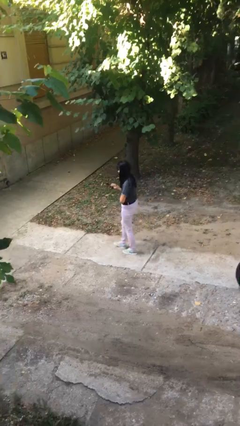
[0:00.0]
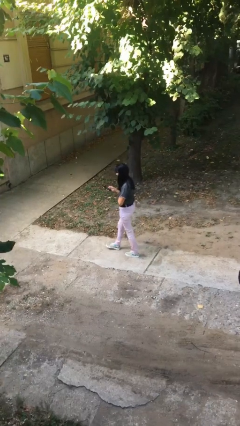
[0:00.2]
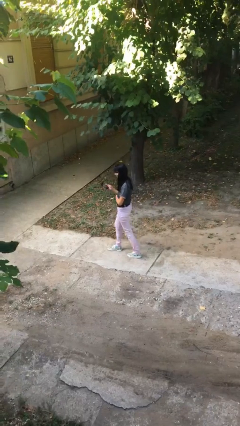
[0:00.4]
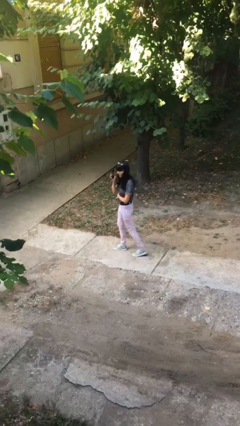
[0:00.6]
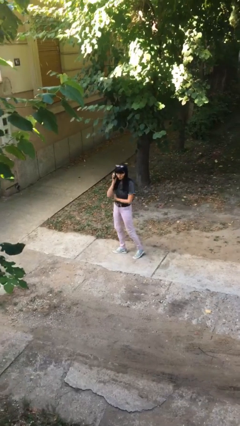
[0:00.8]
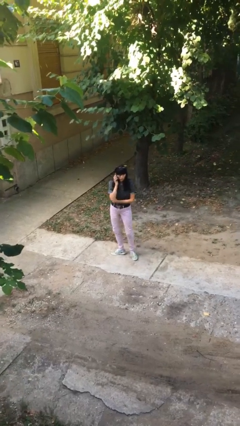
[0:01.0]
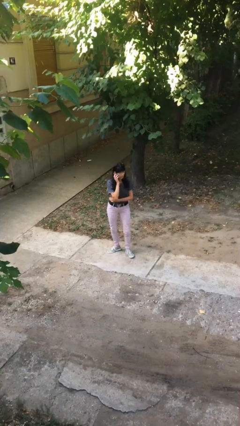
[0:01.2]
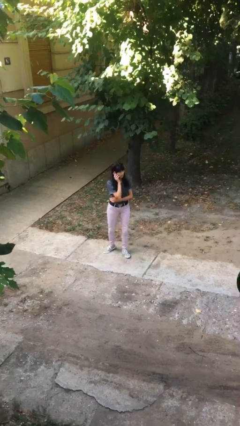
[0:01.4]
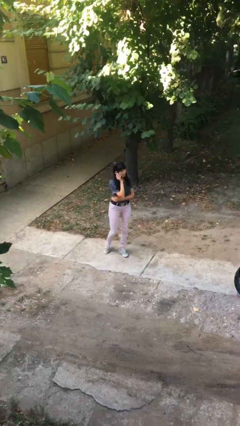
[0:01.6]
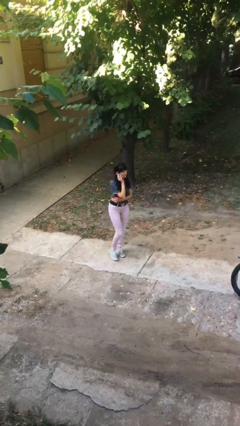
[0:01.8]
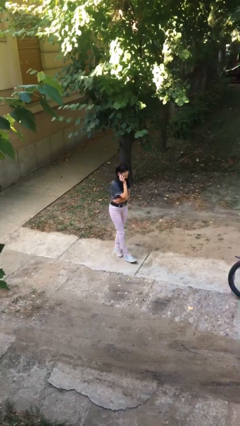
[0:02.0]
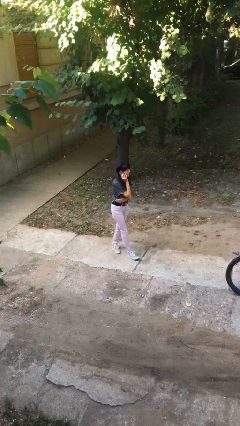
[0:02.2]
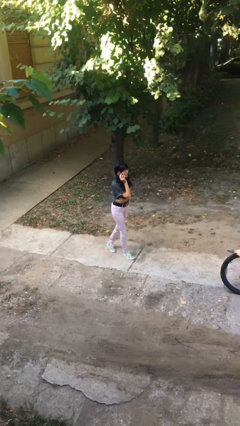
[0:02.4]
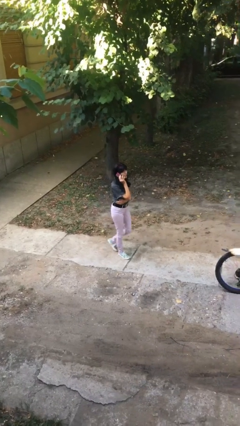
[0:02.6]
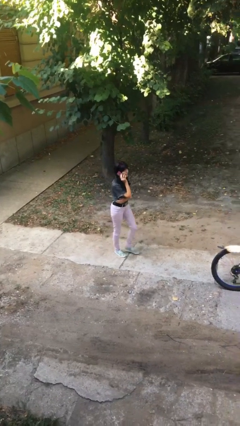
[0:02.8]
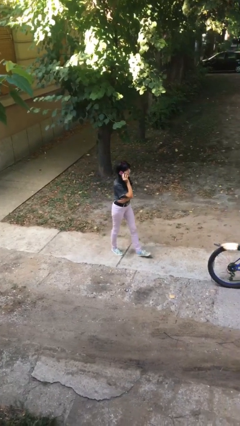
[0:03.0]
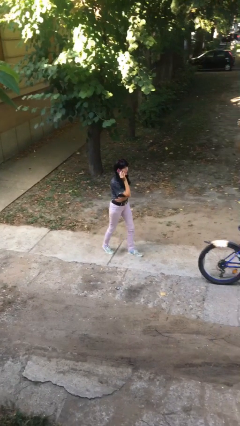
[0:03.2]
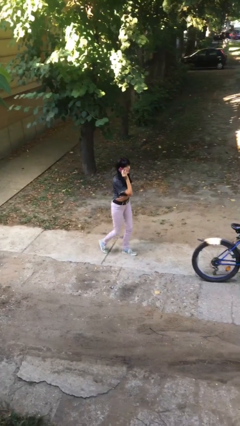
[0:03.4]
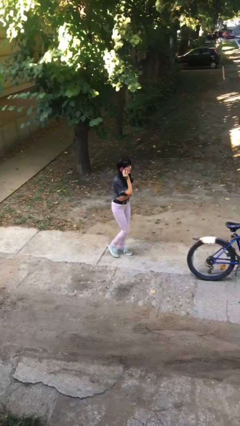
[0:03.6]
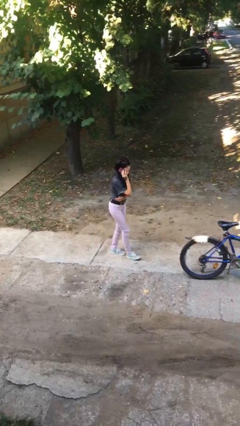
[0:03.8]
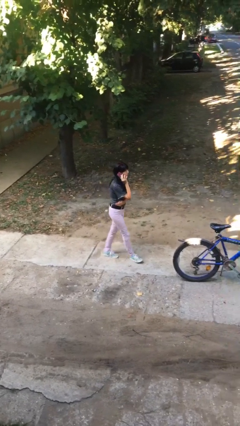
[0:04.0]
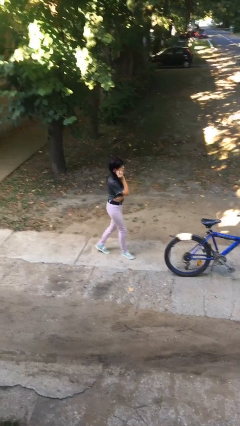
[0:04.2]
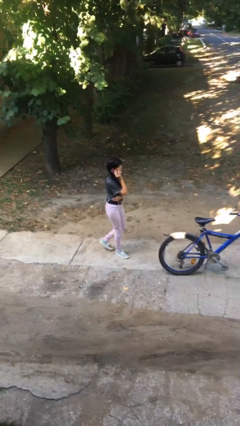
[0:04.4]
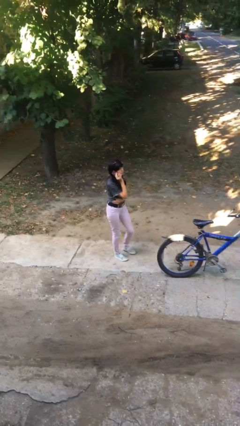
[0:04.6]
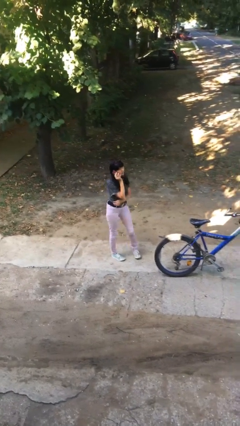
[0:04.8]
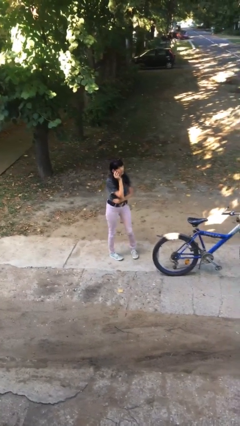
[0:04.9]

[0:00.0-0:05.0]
person talks on phone

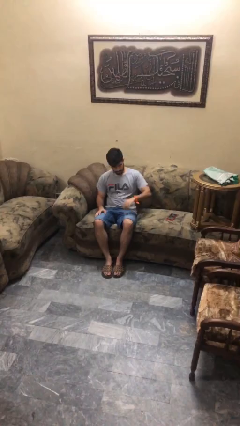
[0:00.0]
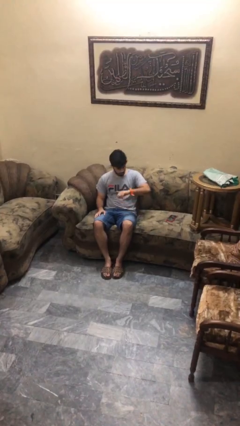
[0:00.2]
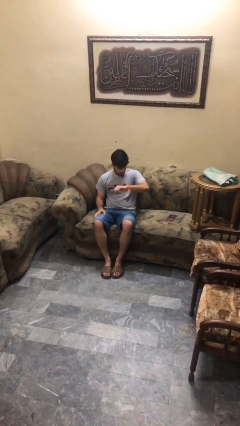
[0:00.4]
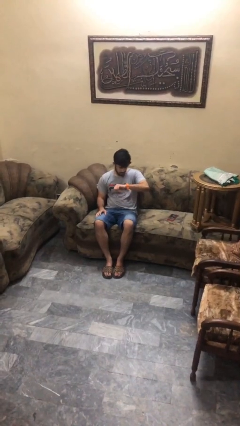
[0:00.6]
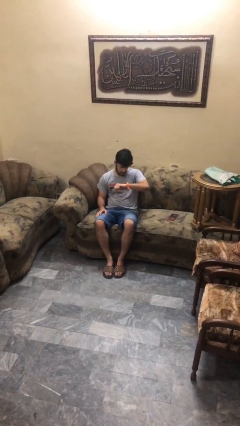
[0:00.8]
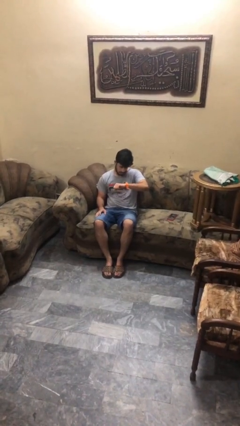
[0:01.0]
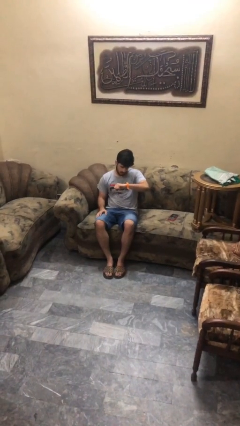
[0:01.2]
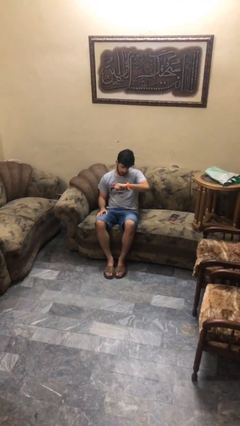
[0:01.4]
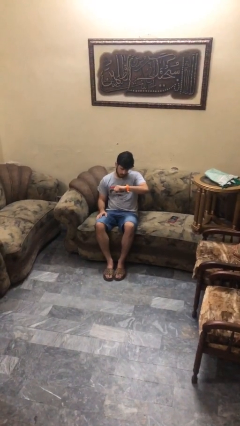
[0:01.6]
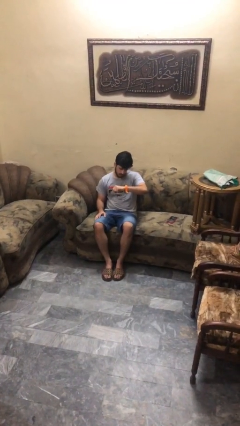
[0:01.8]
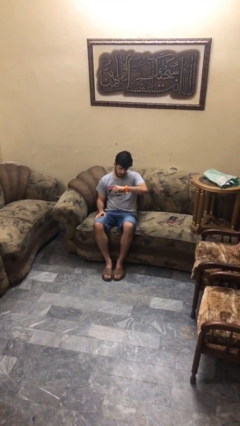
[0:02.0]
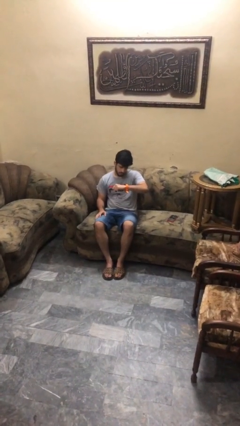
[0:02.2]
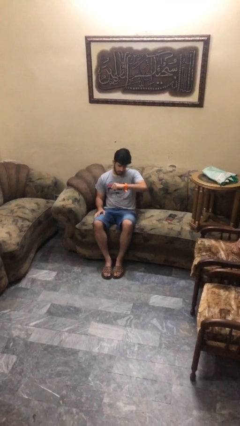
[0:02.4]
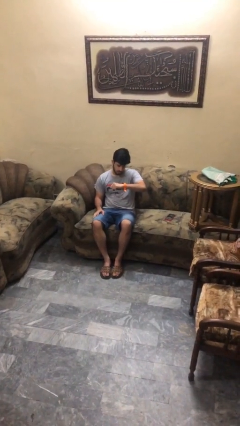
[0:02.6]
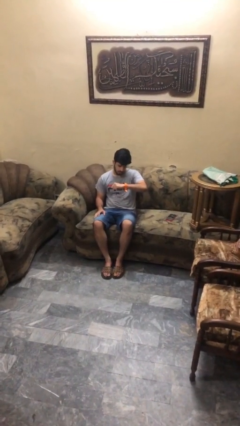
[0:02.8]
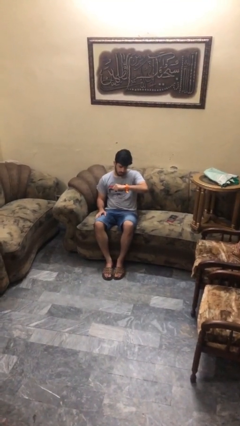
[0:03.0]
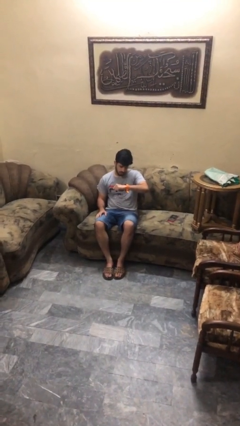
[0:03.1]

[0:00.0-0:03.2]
person looks at wristwatch

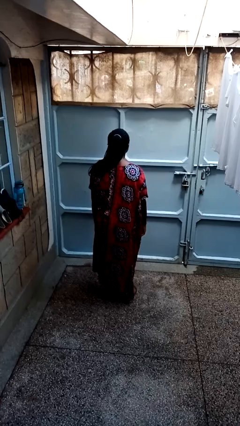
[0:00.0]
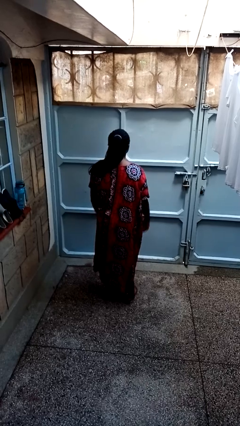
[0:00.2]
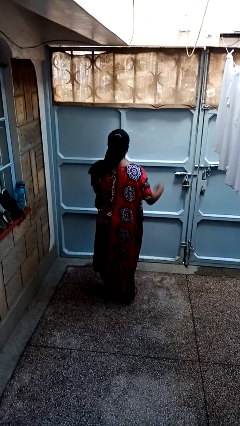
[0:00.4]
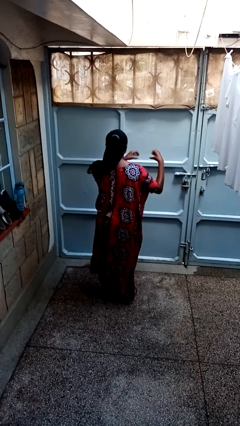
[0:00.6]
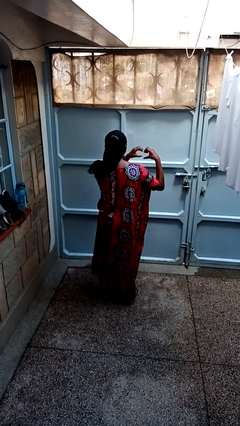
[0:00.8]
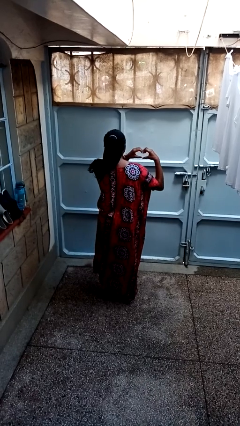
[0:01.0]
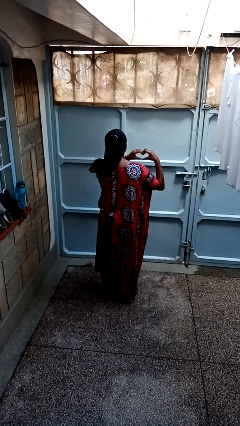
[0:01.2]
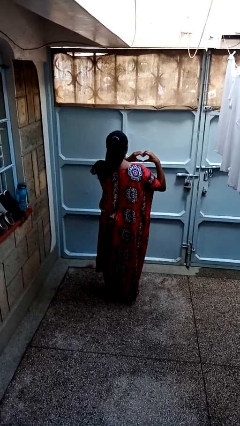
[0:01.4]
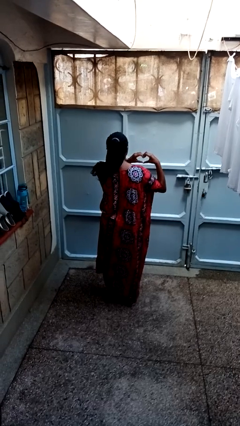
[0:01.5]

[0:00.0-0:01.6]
person gestures heart

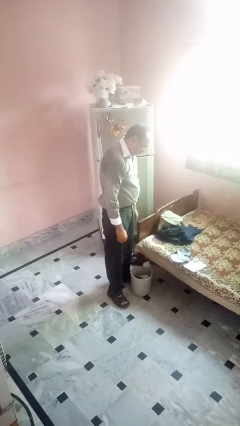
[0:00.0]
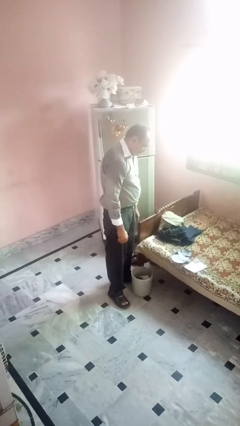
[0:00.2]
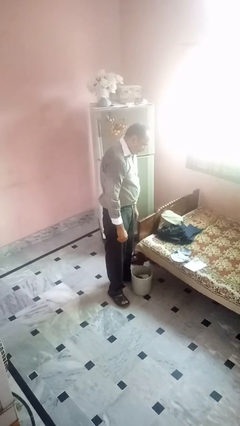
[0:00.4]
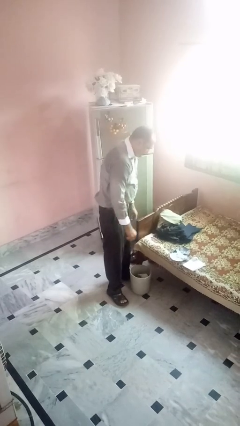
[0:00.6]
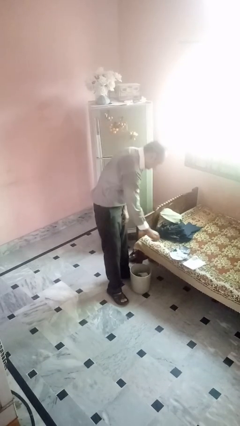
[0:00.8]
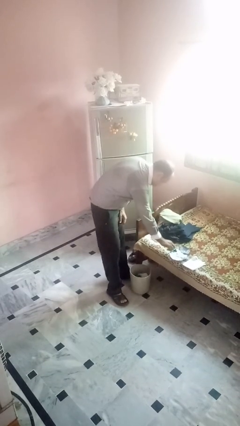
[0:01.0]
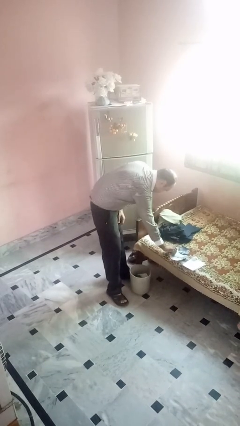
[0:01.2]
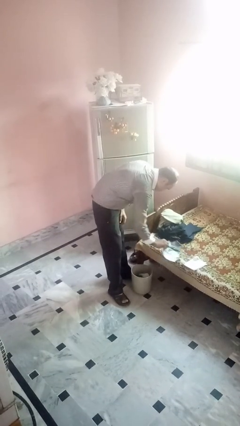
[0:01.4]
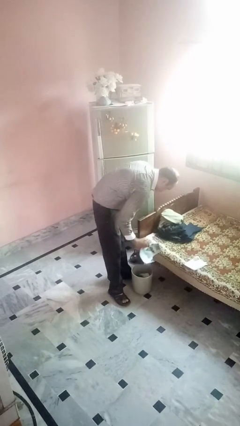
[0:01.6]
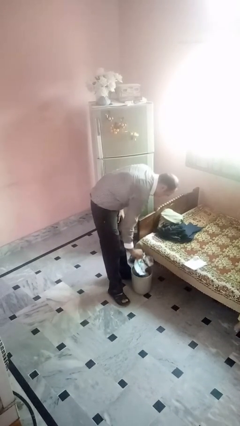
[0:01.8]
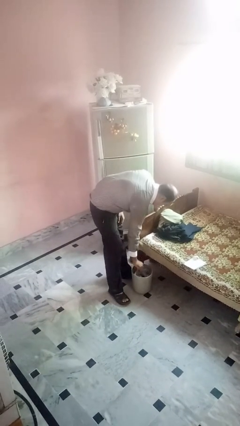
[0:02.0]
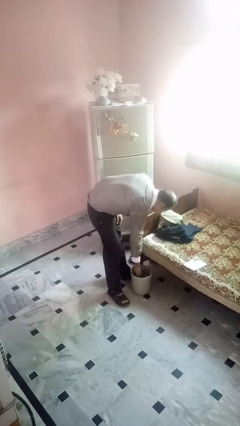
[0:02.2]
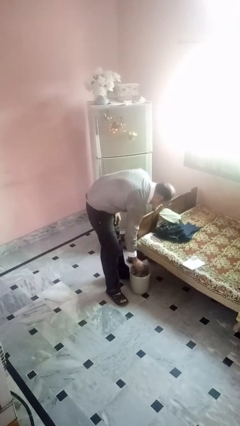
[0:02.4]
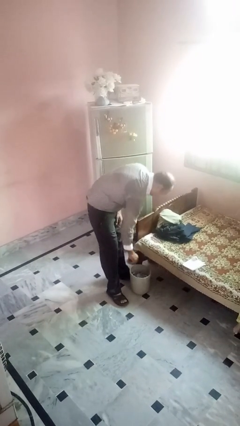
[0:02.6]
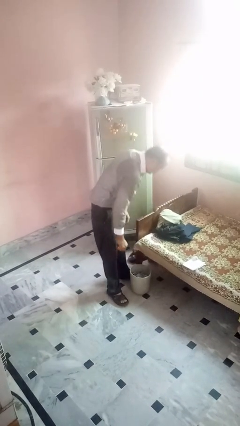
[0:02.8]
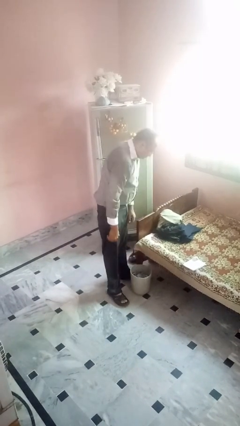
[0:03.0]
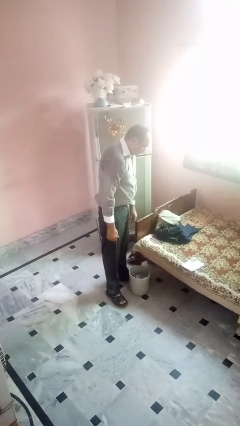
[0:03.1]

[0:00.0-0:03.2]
person discards trash

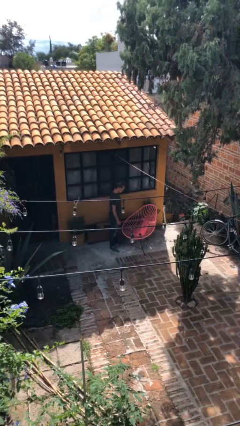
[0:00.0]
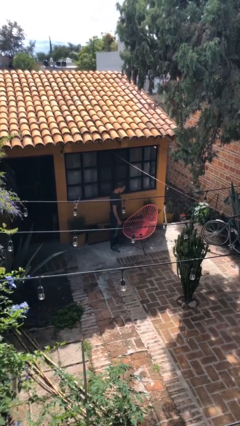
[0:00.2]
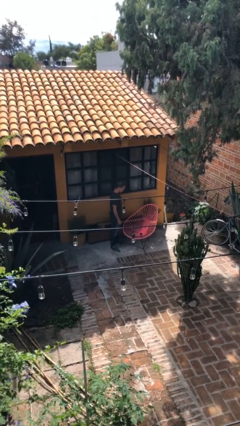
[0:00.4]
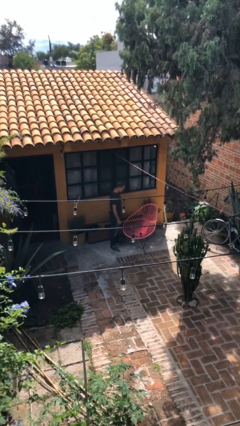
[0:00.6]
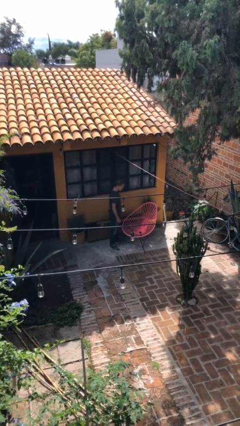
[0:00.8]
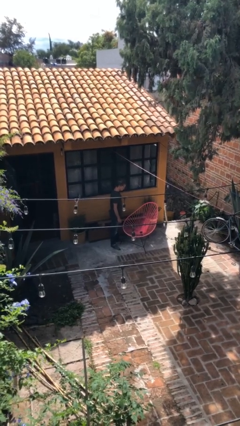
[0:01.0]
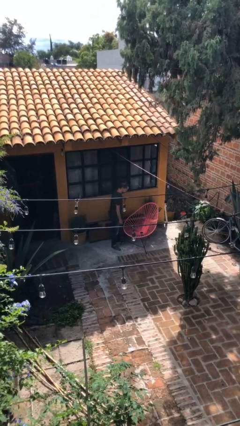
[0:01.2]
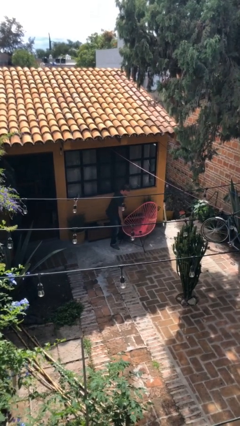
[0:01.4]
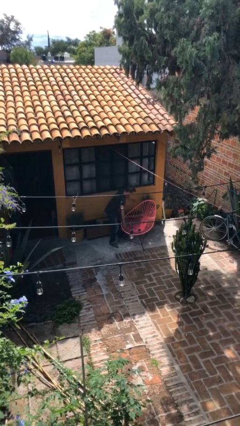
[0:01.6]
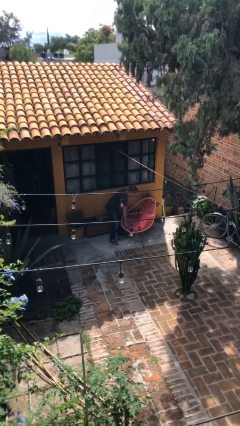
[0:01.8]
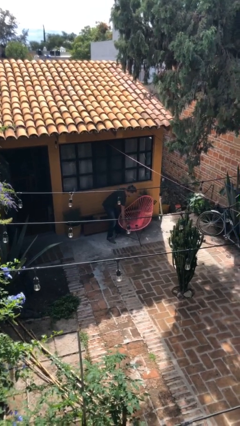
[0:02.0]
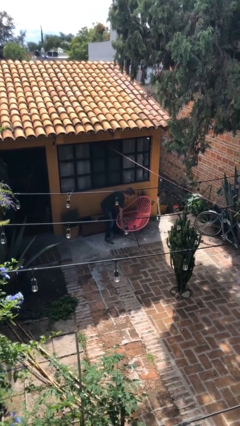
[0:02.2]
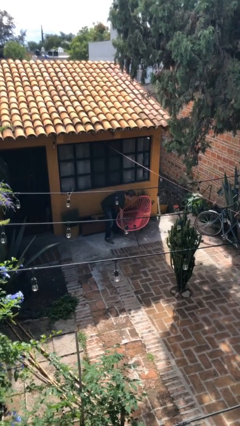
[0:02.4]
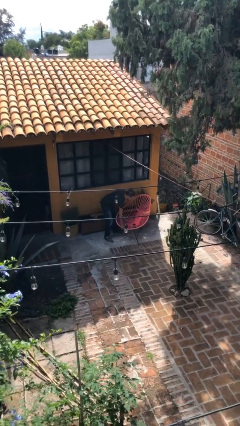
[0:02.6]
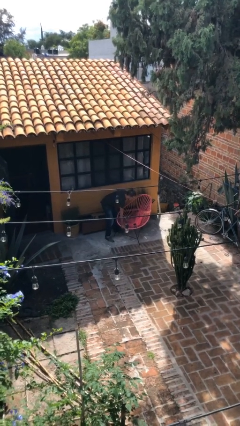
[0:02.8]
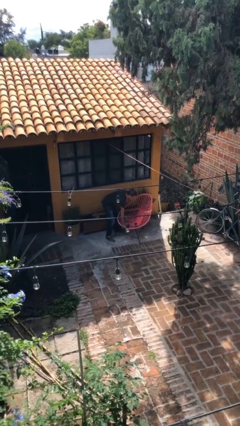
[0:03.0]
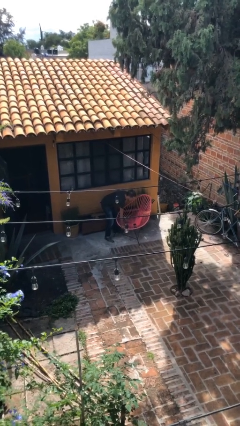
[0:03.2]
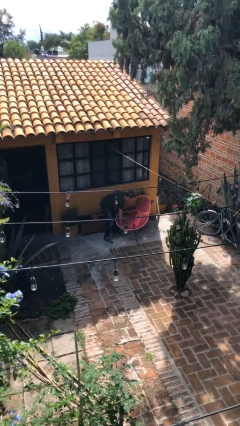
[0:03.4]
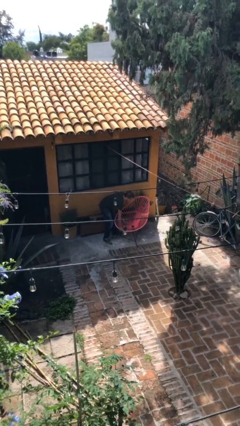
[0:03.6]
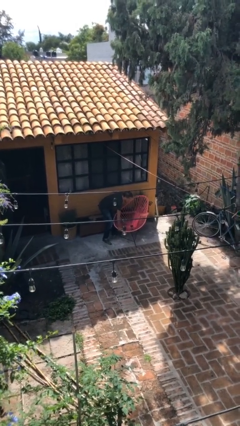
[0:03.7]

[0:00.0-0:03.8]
person picks up object from floor

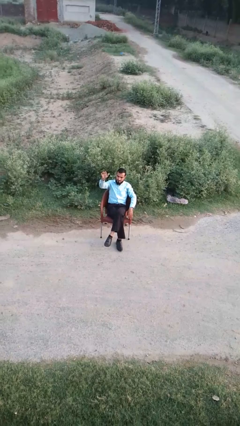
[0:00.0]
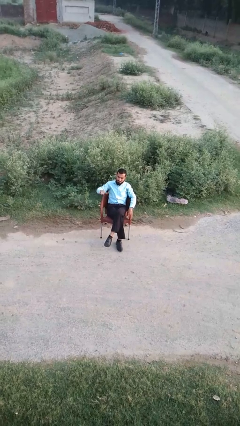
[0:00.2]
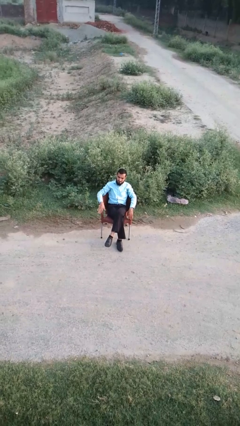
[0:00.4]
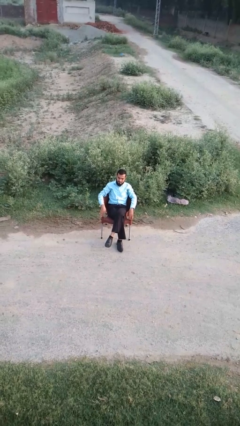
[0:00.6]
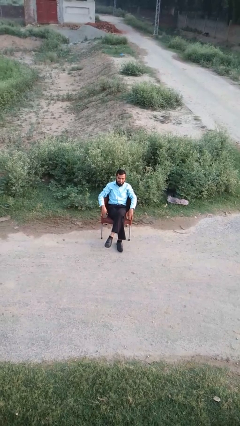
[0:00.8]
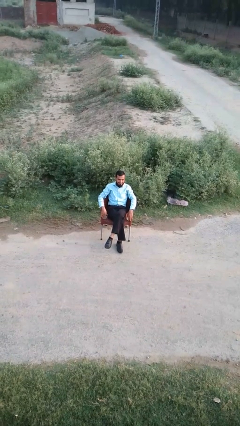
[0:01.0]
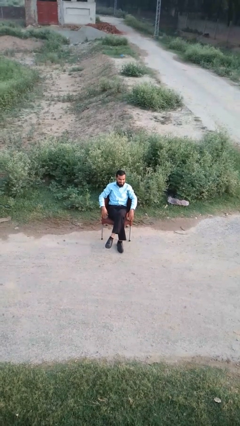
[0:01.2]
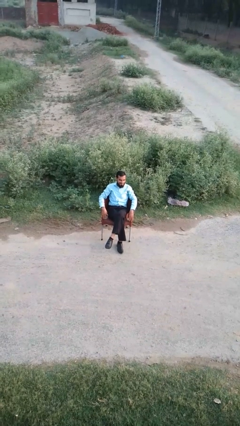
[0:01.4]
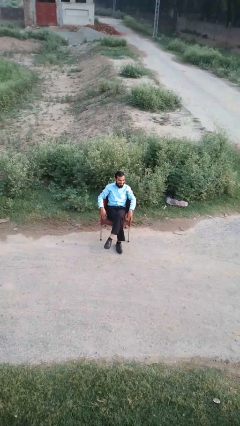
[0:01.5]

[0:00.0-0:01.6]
person gestures swipe down
